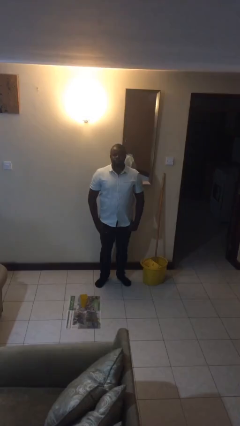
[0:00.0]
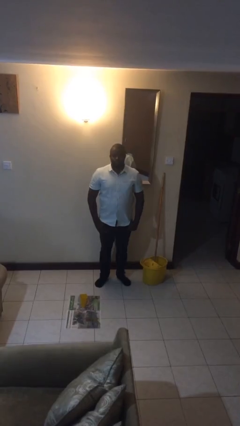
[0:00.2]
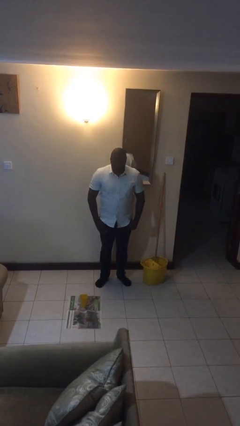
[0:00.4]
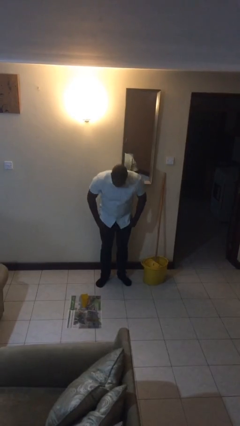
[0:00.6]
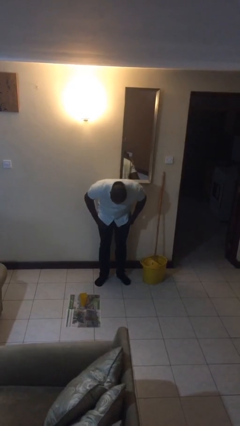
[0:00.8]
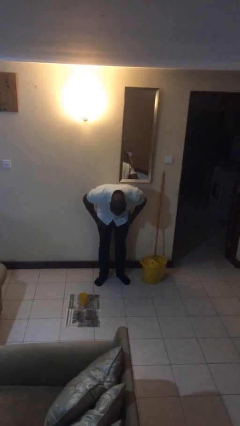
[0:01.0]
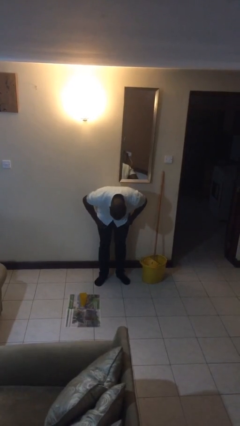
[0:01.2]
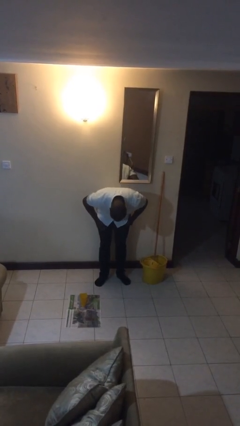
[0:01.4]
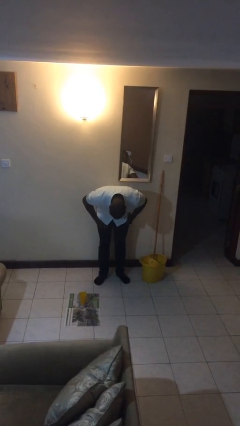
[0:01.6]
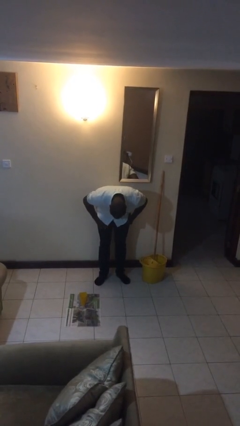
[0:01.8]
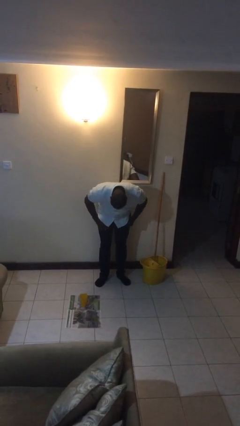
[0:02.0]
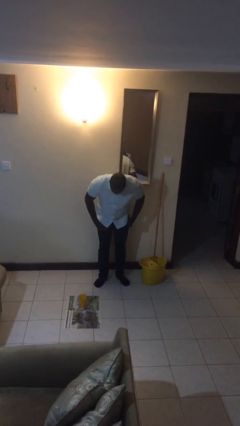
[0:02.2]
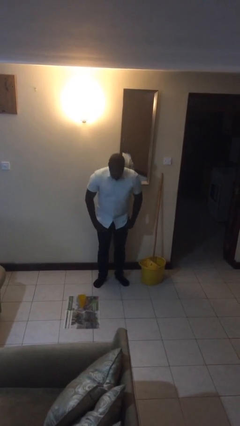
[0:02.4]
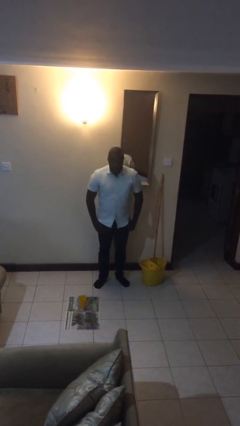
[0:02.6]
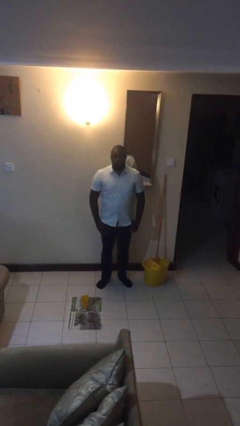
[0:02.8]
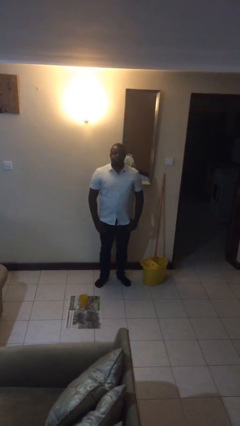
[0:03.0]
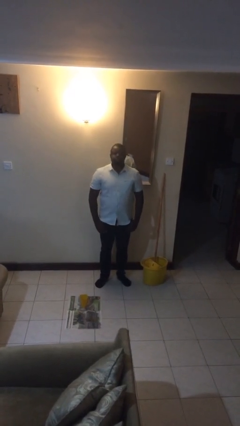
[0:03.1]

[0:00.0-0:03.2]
person bows

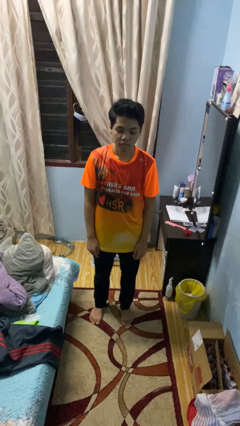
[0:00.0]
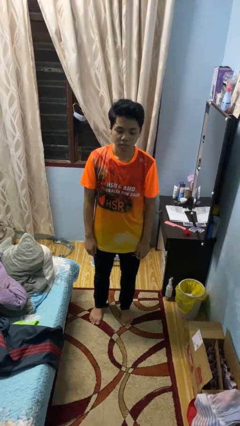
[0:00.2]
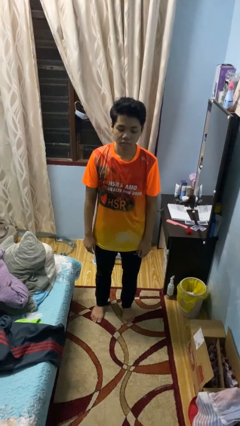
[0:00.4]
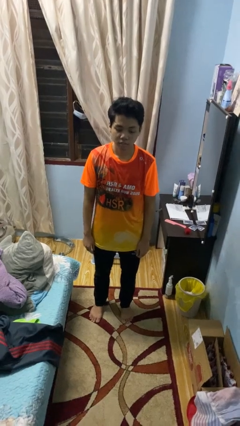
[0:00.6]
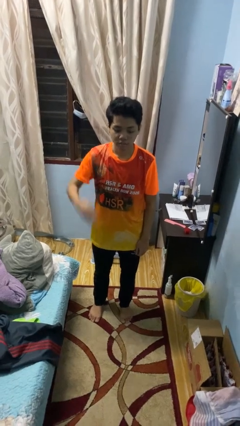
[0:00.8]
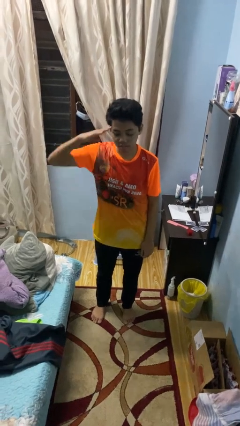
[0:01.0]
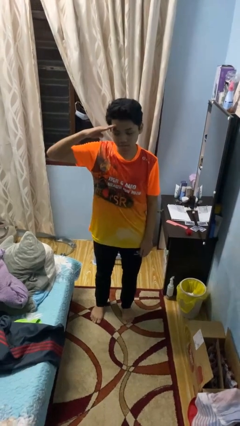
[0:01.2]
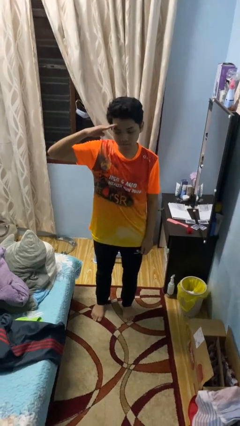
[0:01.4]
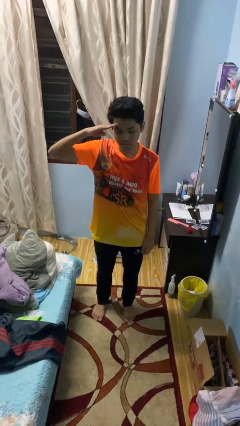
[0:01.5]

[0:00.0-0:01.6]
person salutes

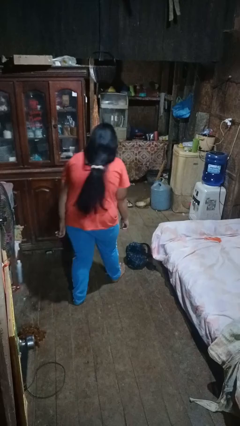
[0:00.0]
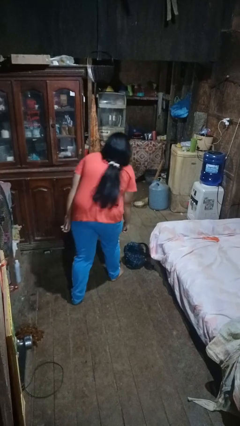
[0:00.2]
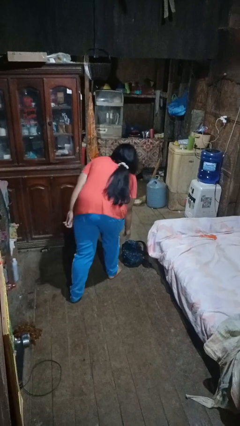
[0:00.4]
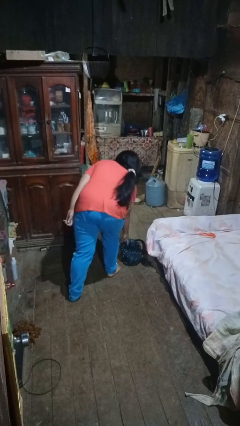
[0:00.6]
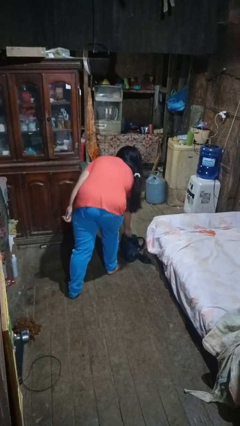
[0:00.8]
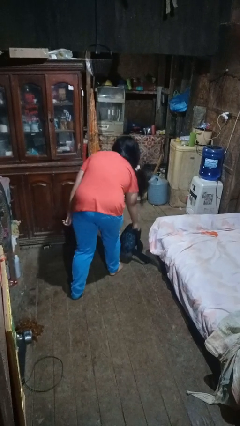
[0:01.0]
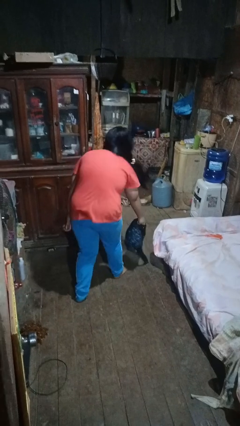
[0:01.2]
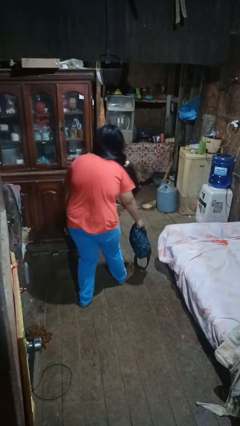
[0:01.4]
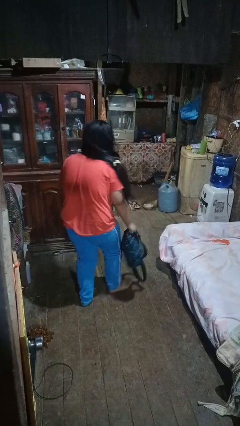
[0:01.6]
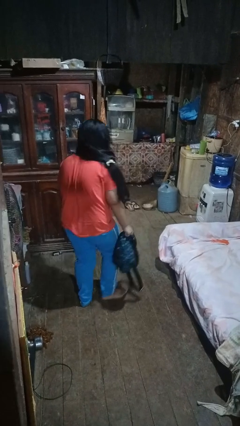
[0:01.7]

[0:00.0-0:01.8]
person picks up object from floor

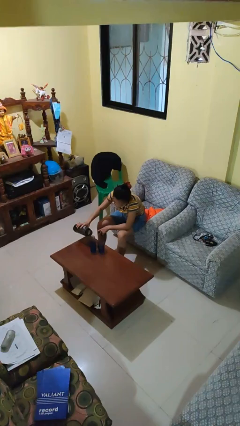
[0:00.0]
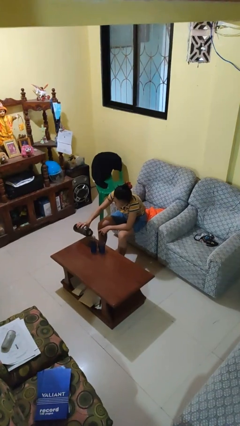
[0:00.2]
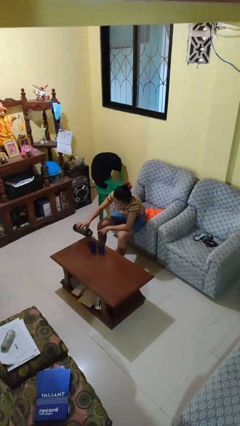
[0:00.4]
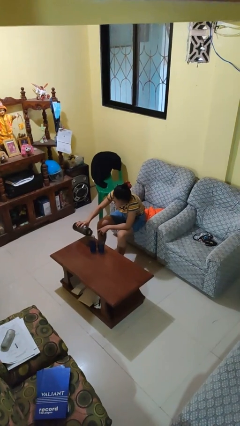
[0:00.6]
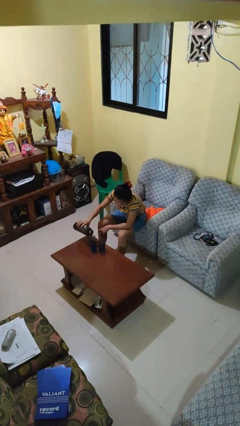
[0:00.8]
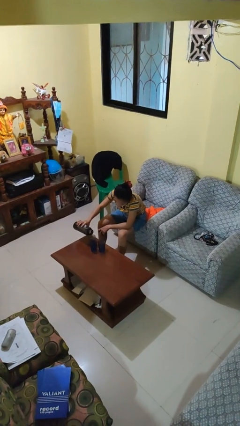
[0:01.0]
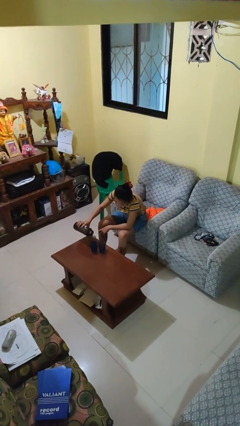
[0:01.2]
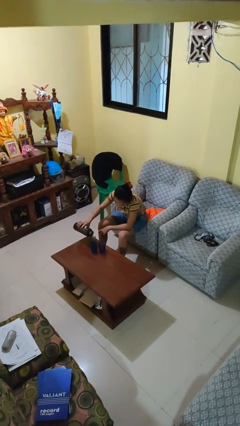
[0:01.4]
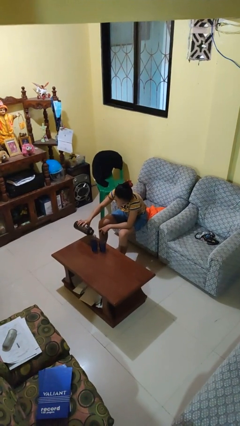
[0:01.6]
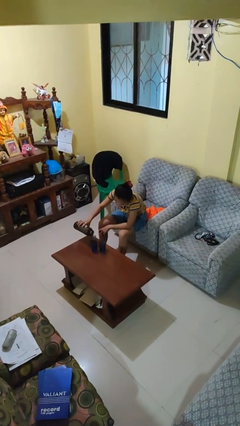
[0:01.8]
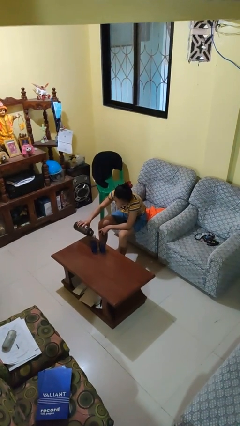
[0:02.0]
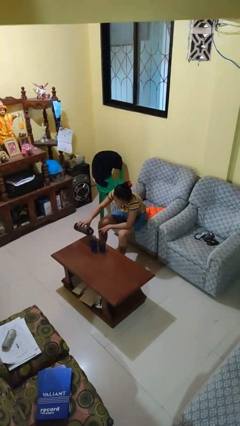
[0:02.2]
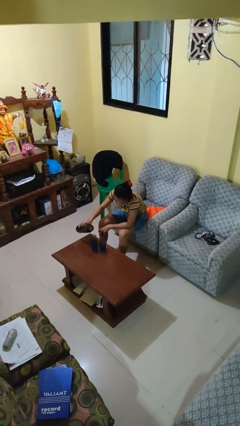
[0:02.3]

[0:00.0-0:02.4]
person pours liquid into cup

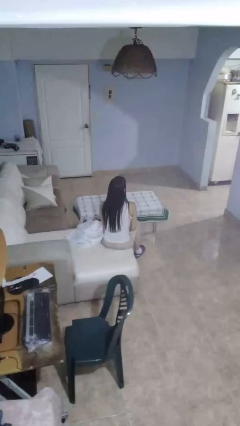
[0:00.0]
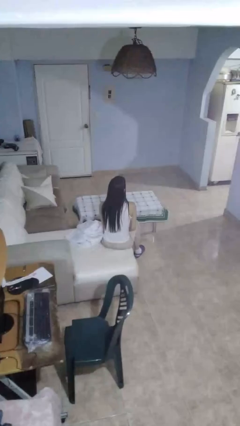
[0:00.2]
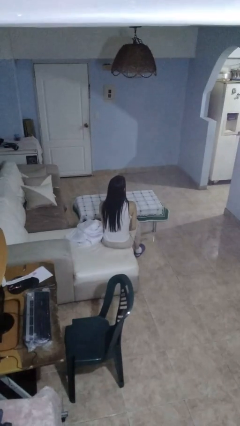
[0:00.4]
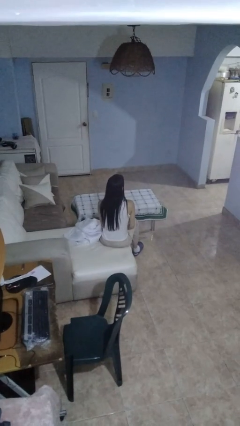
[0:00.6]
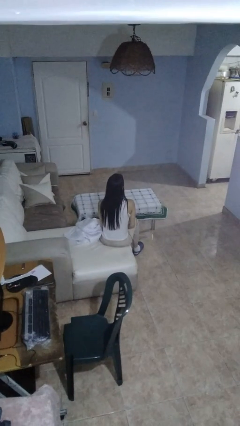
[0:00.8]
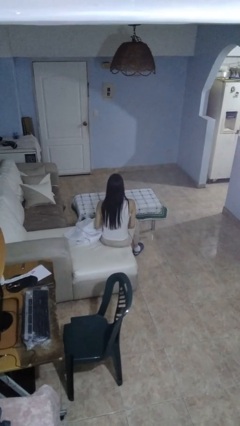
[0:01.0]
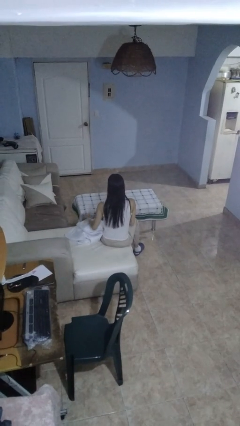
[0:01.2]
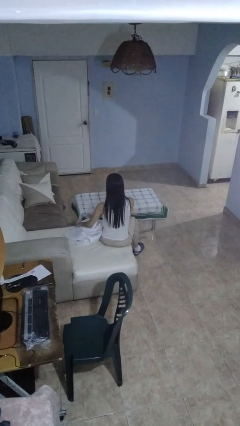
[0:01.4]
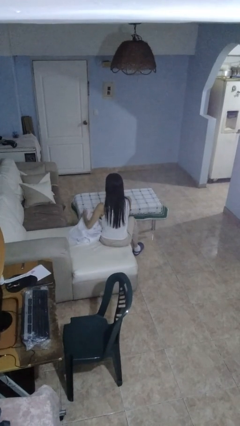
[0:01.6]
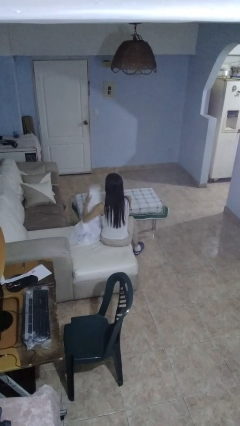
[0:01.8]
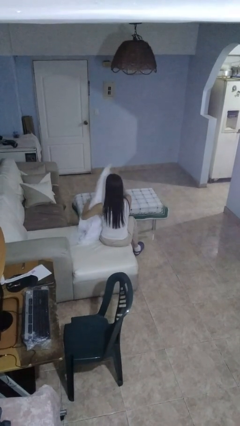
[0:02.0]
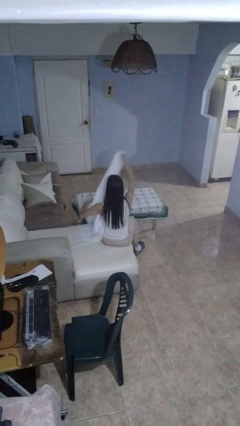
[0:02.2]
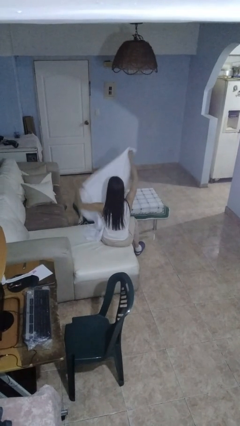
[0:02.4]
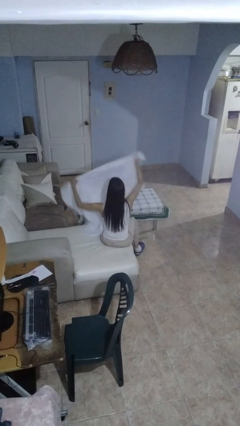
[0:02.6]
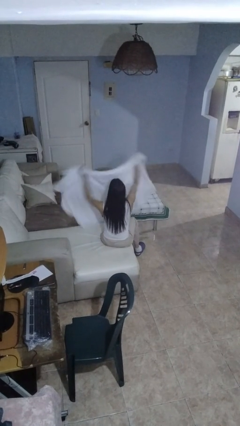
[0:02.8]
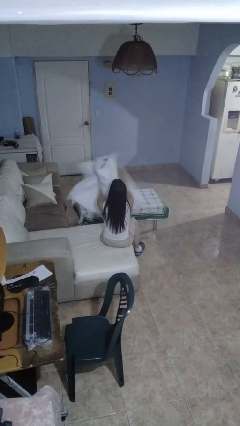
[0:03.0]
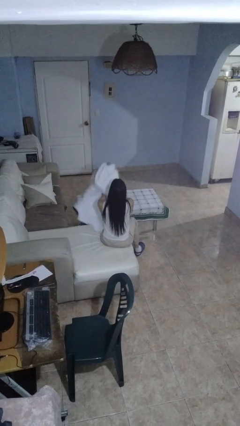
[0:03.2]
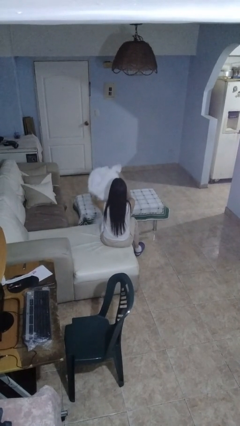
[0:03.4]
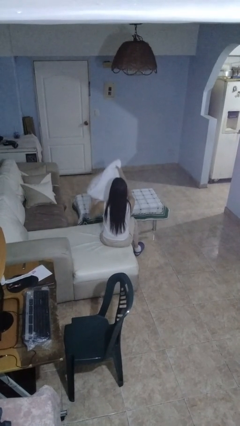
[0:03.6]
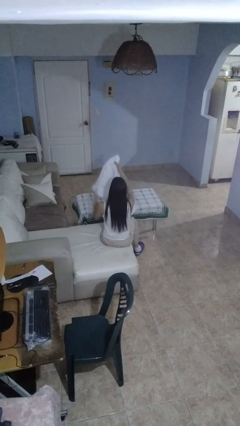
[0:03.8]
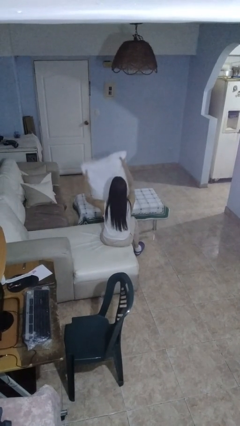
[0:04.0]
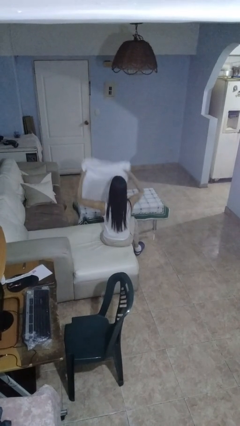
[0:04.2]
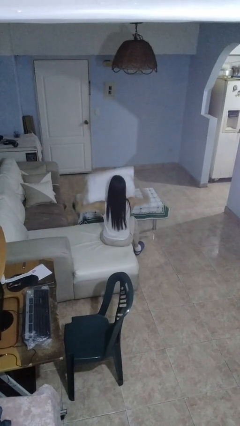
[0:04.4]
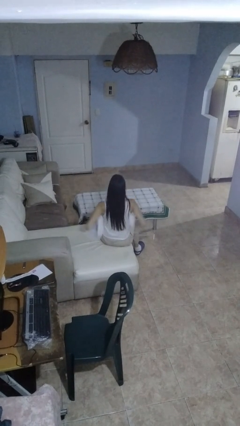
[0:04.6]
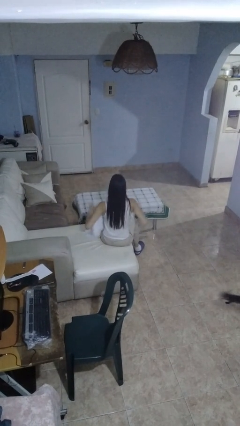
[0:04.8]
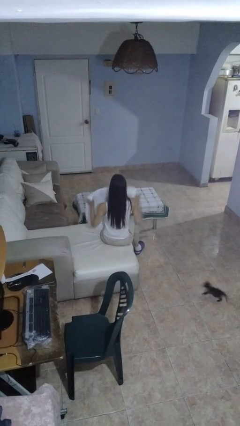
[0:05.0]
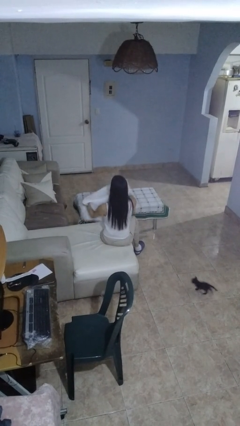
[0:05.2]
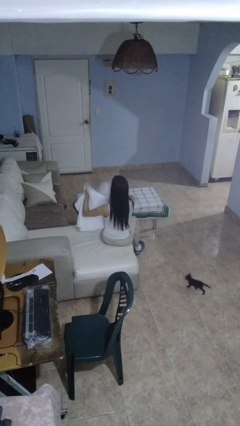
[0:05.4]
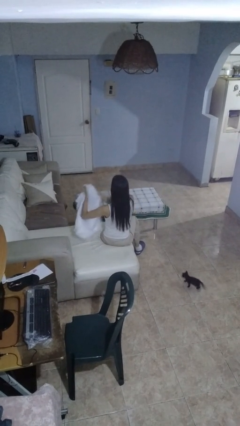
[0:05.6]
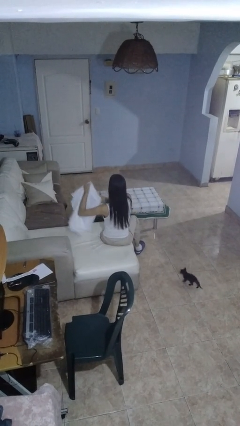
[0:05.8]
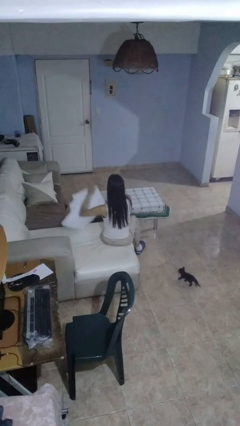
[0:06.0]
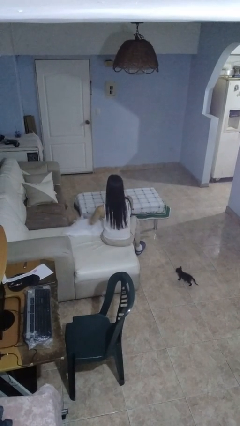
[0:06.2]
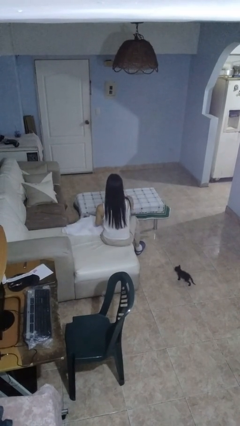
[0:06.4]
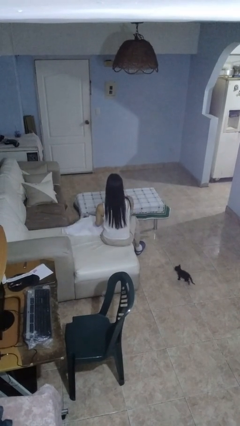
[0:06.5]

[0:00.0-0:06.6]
person folds blanket

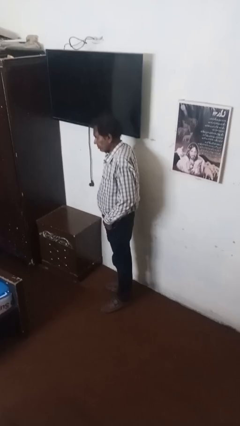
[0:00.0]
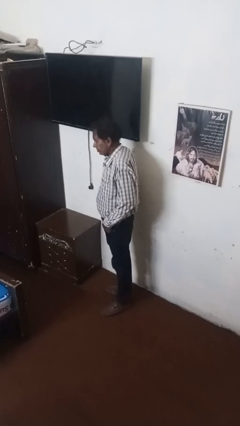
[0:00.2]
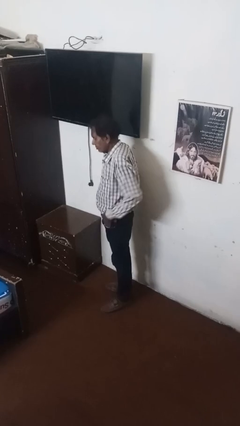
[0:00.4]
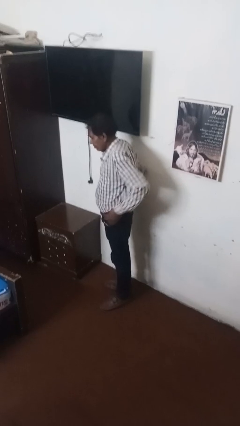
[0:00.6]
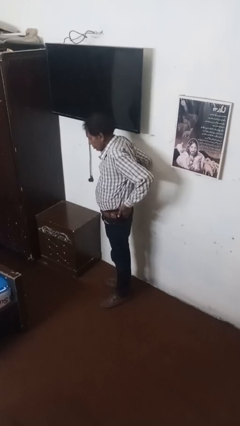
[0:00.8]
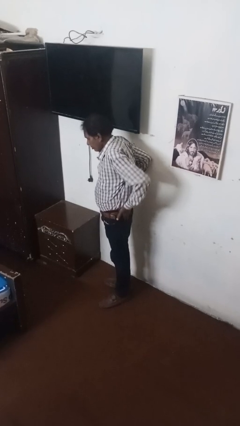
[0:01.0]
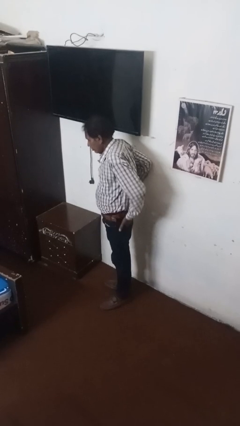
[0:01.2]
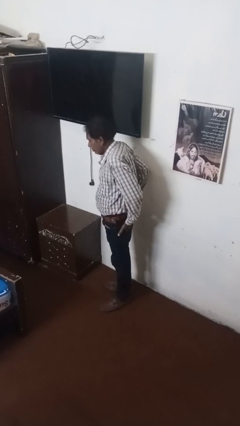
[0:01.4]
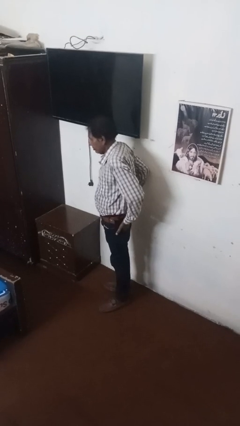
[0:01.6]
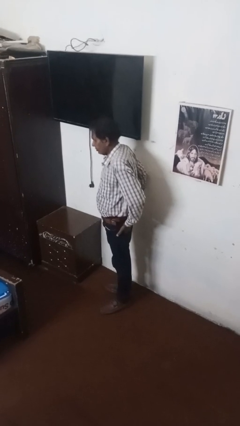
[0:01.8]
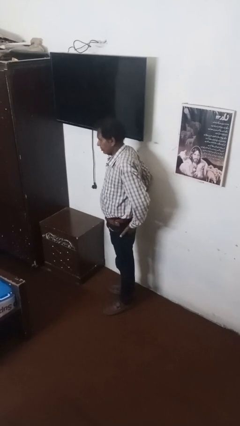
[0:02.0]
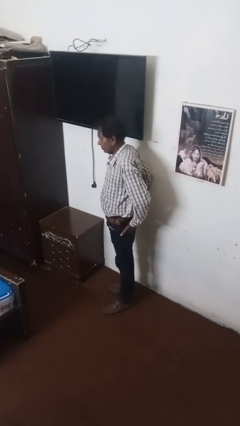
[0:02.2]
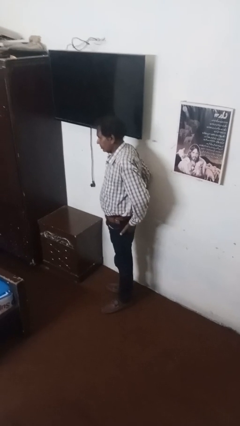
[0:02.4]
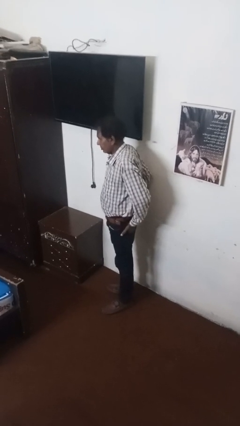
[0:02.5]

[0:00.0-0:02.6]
person puts hands in back pockets
